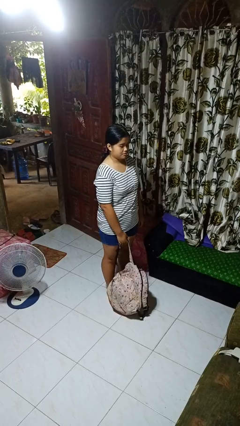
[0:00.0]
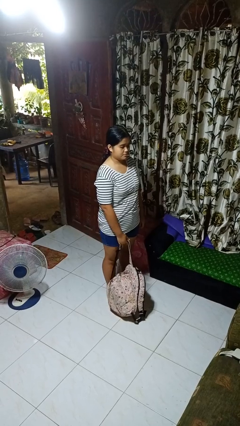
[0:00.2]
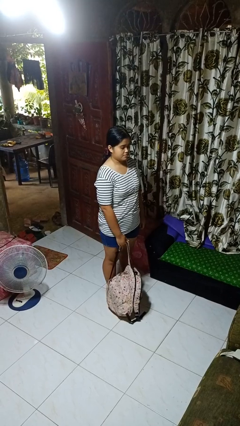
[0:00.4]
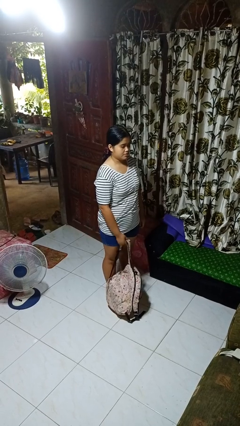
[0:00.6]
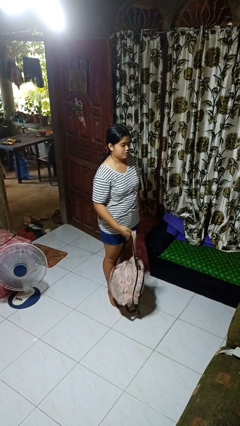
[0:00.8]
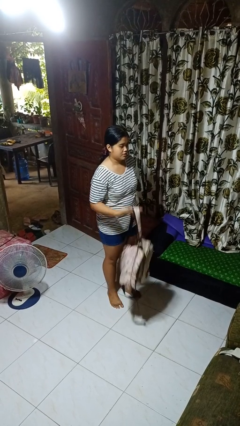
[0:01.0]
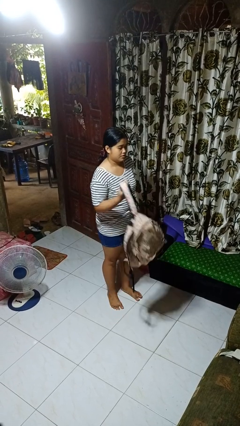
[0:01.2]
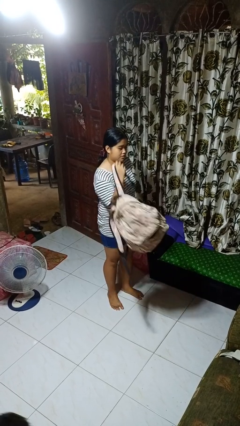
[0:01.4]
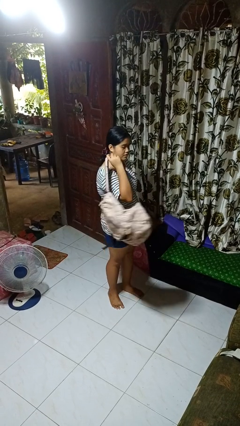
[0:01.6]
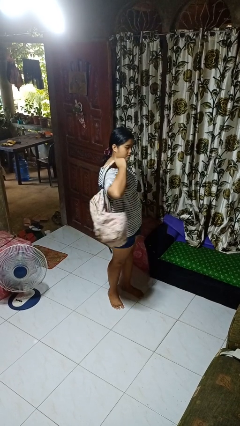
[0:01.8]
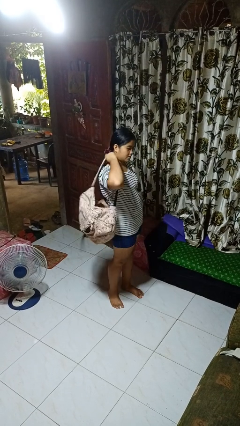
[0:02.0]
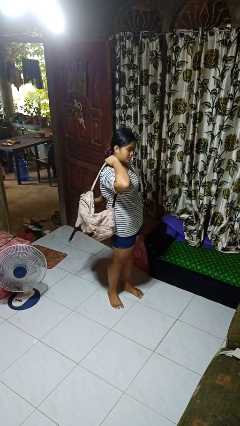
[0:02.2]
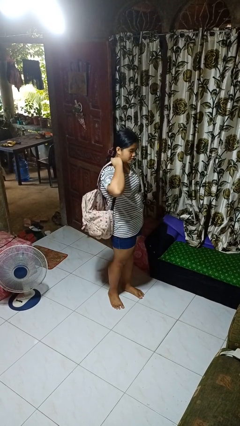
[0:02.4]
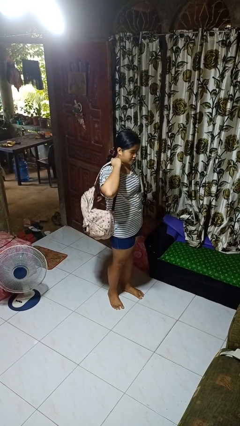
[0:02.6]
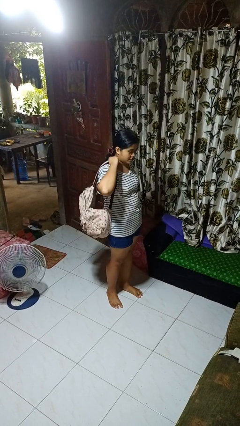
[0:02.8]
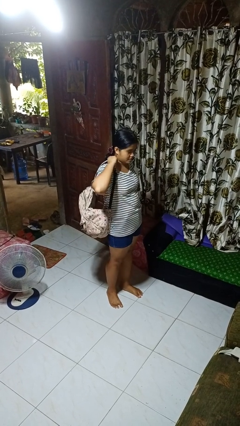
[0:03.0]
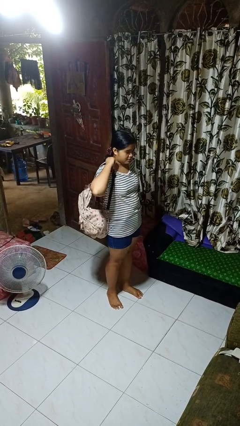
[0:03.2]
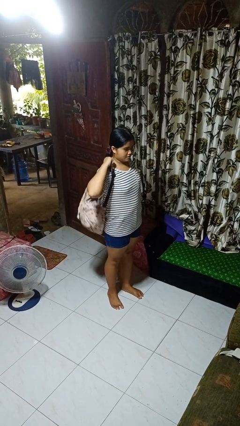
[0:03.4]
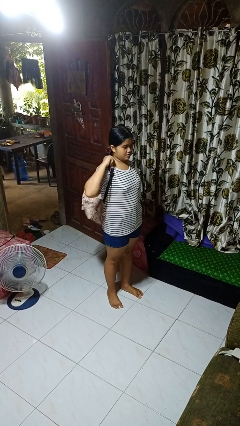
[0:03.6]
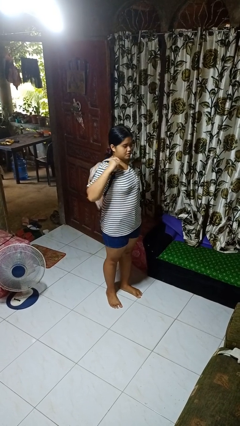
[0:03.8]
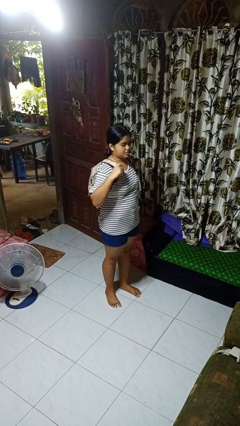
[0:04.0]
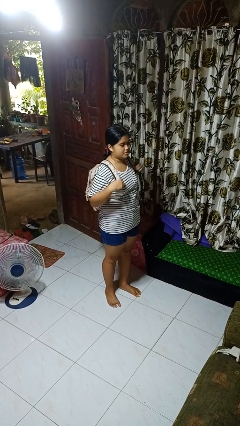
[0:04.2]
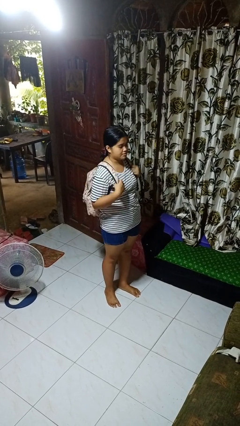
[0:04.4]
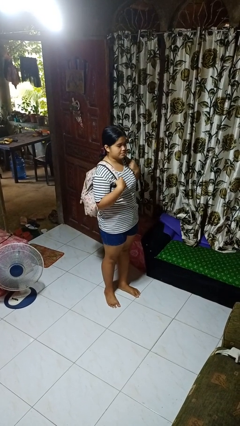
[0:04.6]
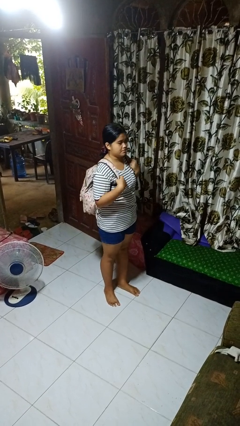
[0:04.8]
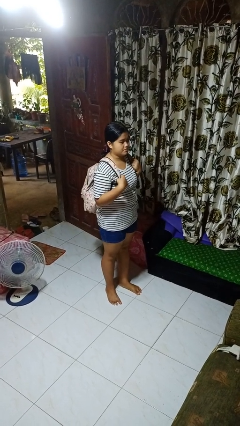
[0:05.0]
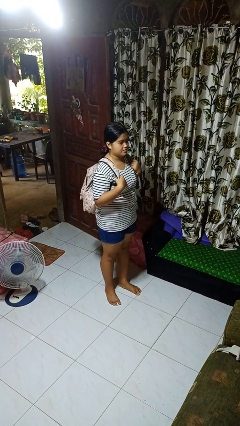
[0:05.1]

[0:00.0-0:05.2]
person puts on backpack

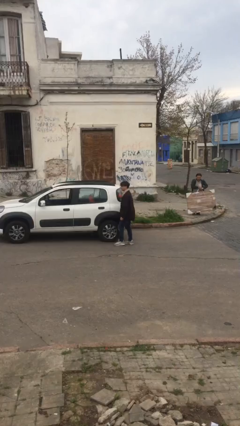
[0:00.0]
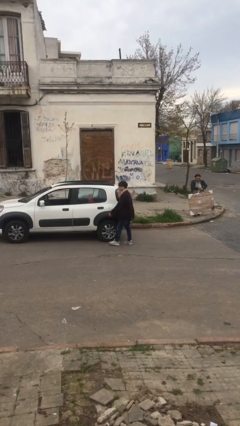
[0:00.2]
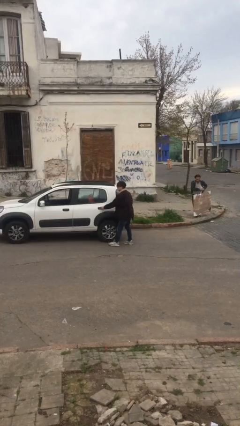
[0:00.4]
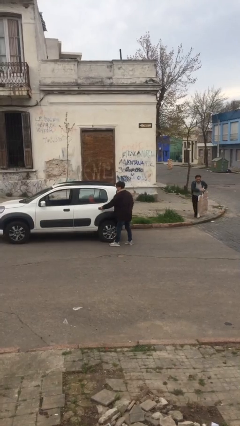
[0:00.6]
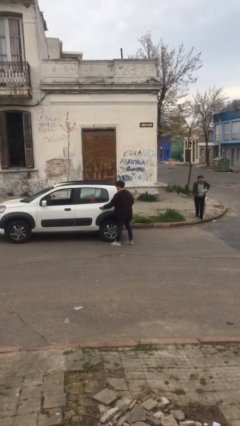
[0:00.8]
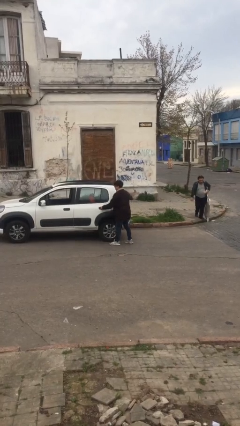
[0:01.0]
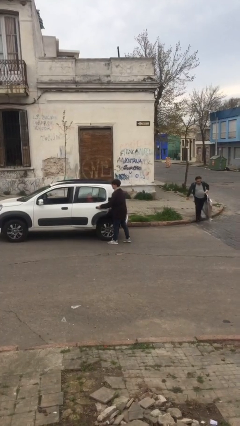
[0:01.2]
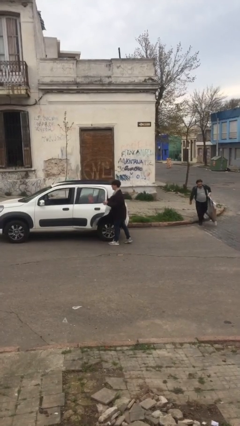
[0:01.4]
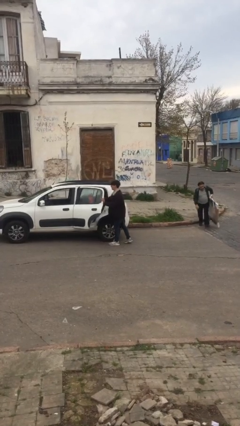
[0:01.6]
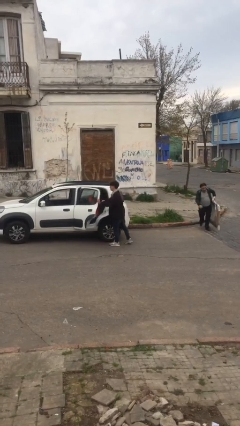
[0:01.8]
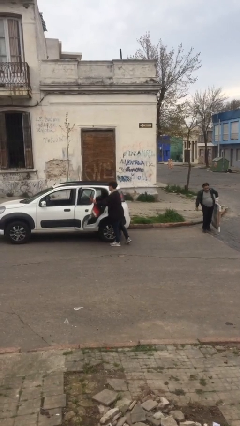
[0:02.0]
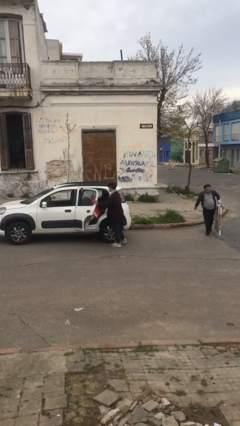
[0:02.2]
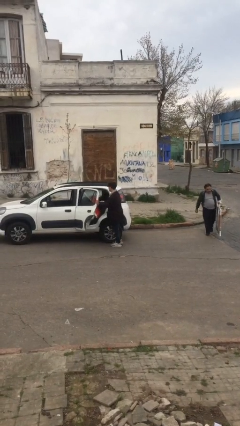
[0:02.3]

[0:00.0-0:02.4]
person opens car door

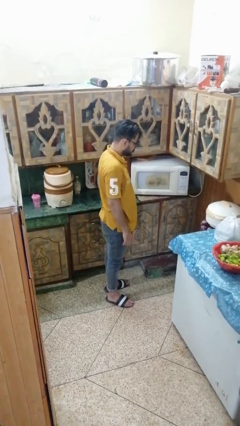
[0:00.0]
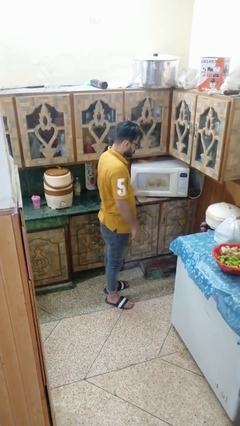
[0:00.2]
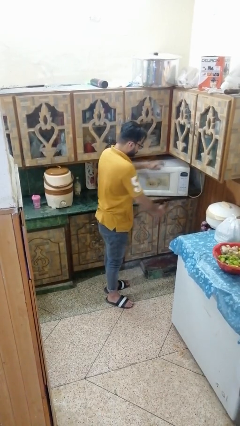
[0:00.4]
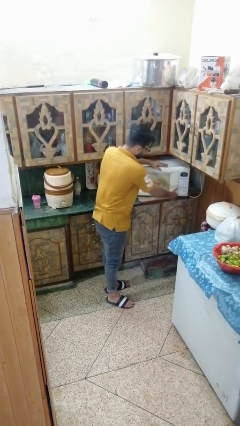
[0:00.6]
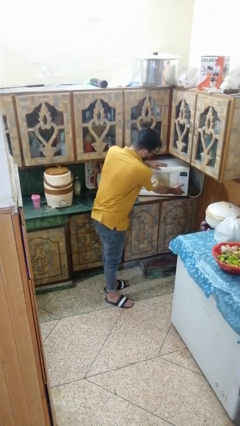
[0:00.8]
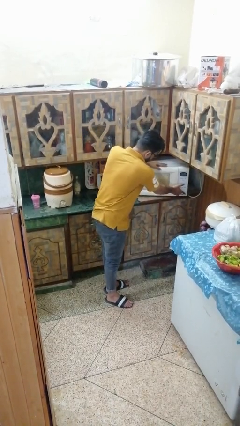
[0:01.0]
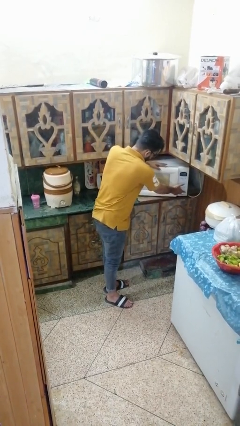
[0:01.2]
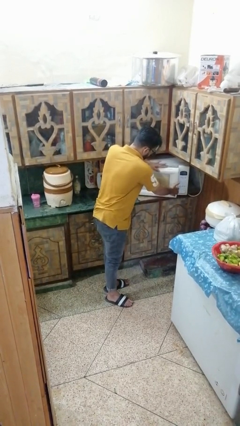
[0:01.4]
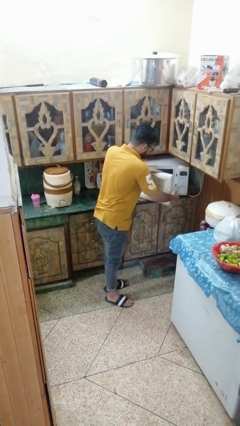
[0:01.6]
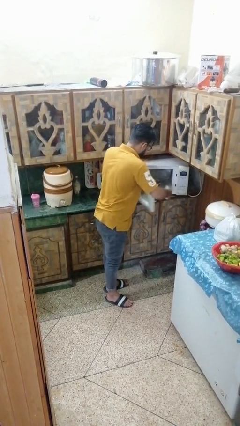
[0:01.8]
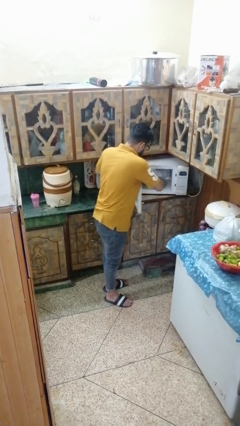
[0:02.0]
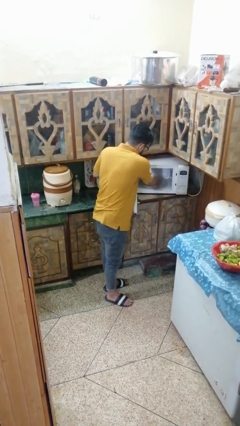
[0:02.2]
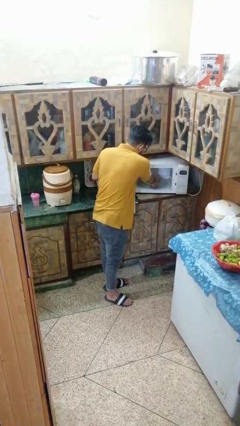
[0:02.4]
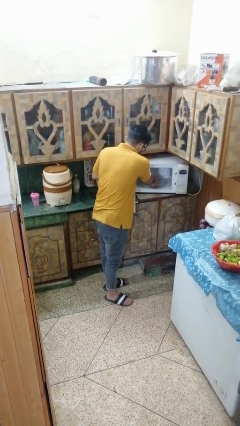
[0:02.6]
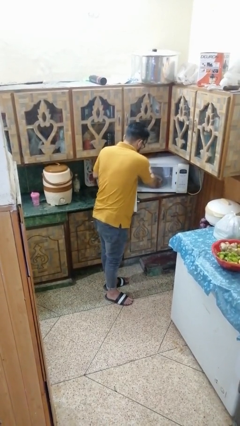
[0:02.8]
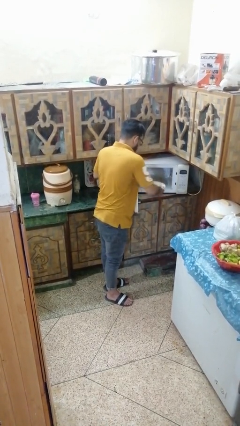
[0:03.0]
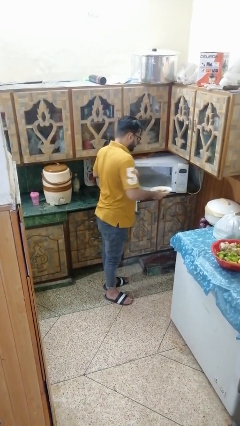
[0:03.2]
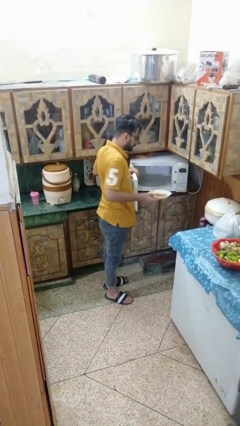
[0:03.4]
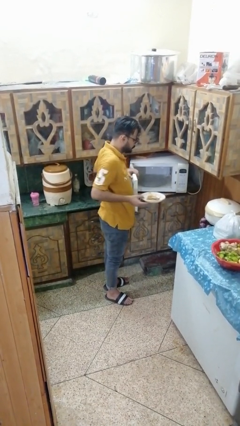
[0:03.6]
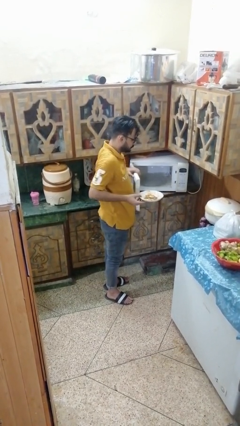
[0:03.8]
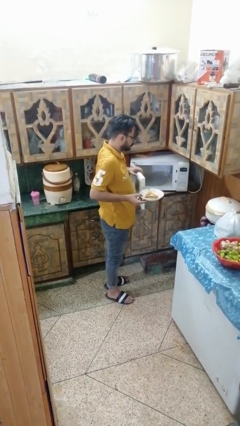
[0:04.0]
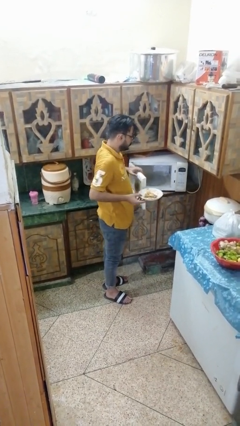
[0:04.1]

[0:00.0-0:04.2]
person takes object from microwave

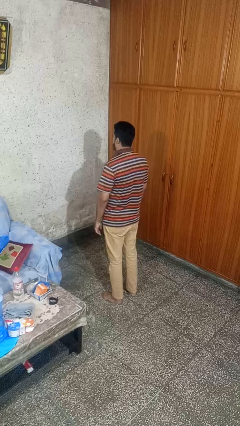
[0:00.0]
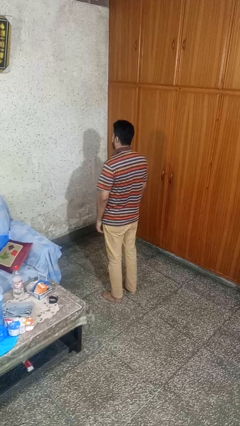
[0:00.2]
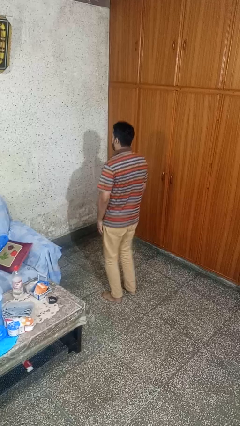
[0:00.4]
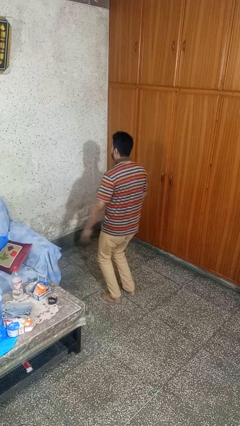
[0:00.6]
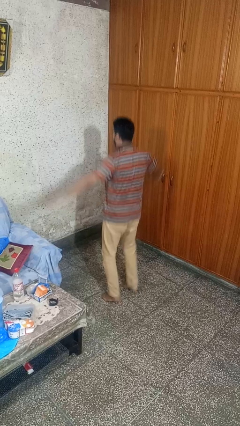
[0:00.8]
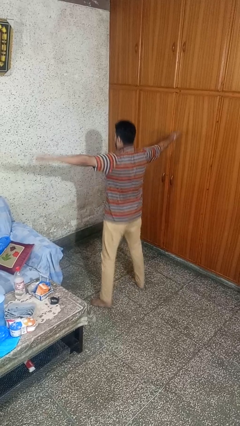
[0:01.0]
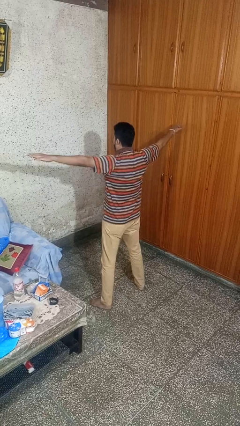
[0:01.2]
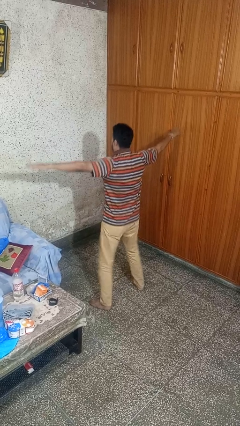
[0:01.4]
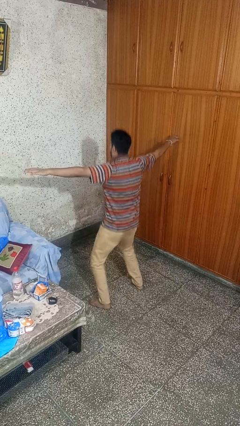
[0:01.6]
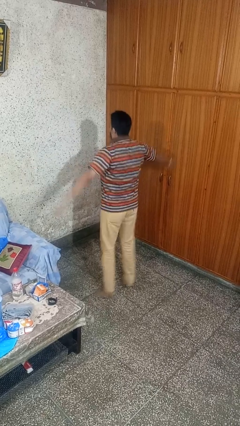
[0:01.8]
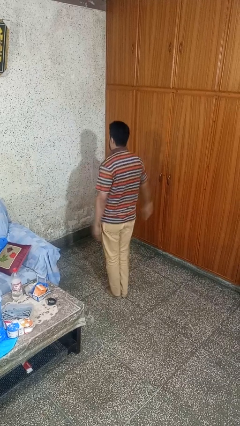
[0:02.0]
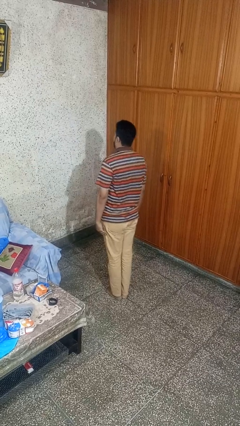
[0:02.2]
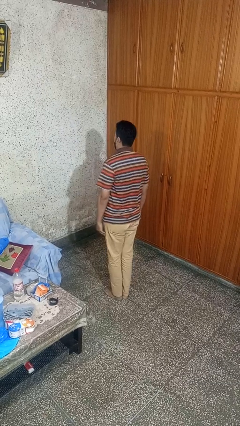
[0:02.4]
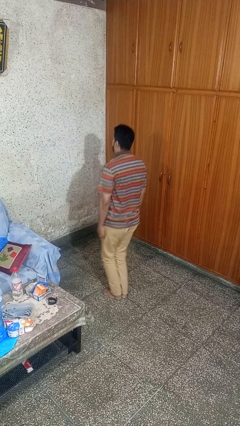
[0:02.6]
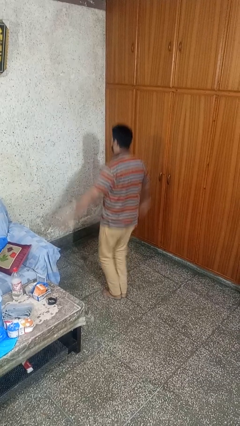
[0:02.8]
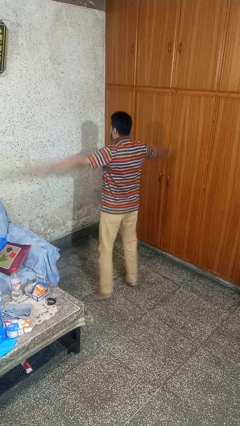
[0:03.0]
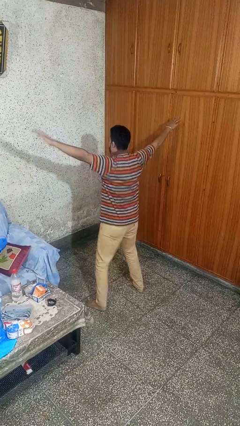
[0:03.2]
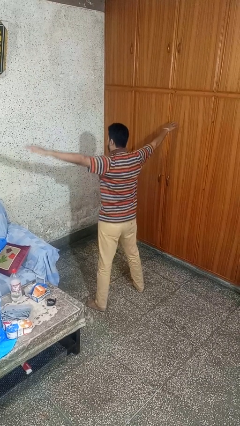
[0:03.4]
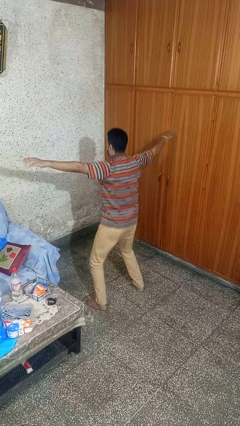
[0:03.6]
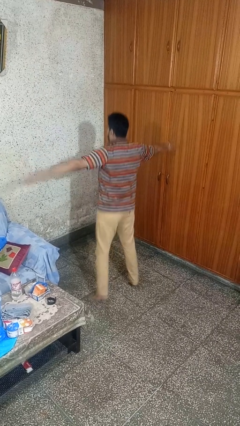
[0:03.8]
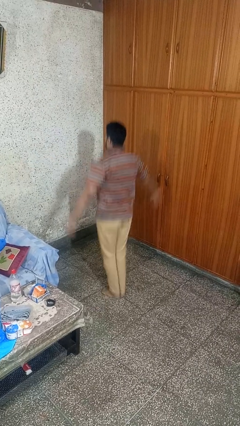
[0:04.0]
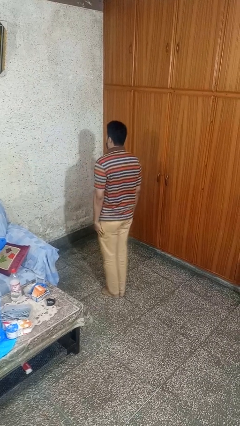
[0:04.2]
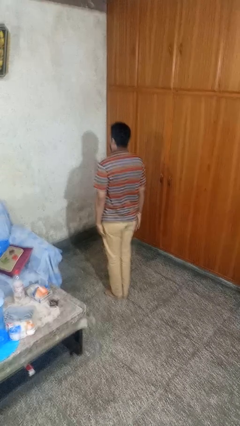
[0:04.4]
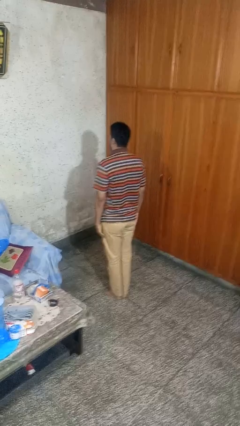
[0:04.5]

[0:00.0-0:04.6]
person exercises with jumping jacks

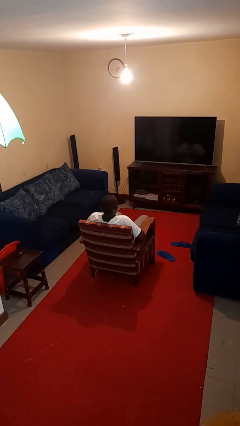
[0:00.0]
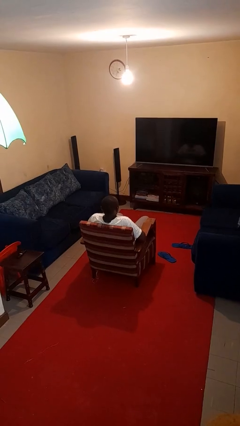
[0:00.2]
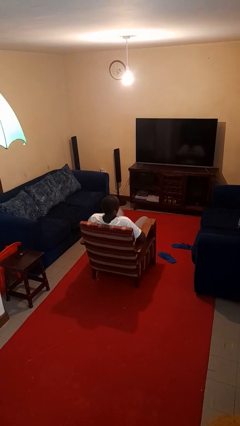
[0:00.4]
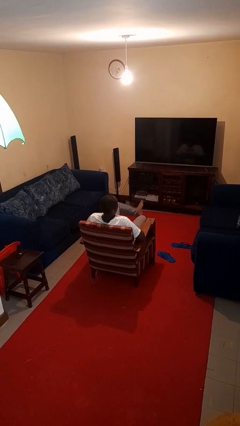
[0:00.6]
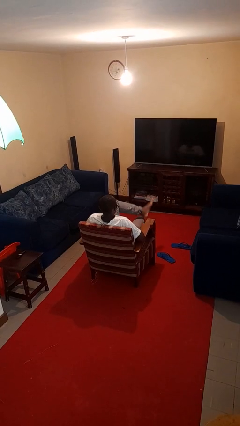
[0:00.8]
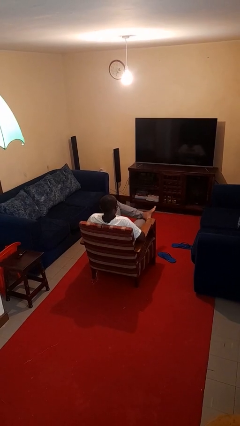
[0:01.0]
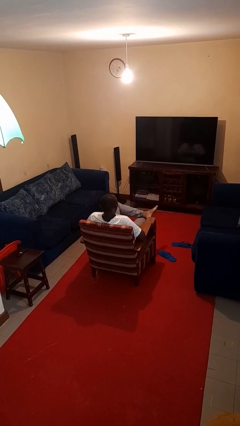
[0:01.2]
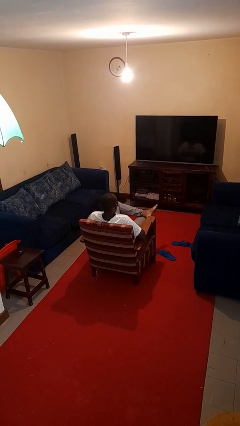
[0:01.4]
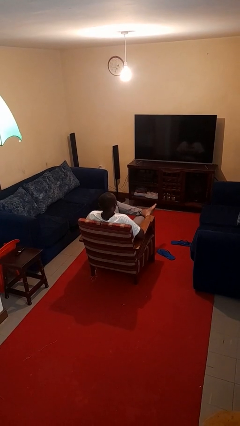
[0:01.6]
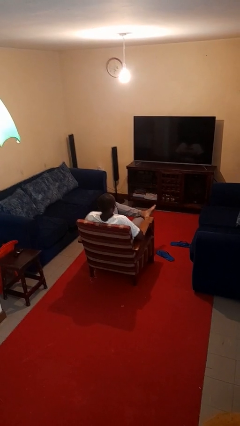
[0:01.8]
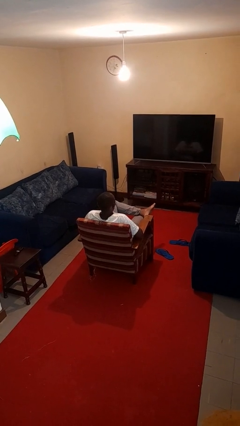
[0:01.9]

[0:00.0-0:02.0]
person crosses legs
